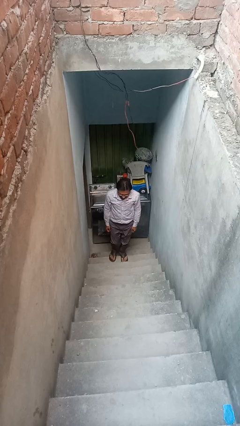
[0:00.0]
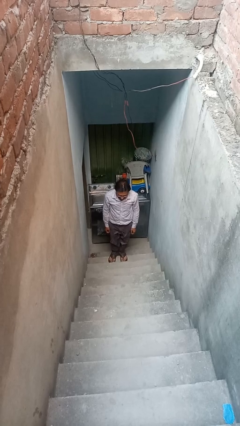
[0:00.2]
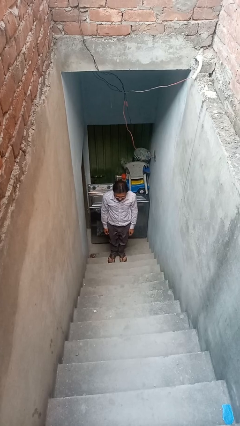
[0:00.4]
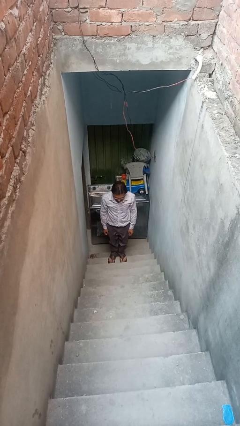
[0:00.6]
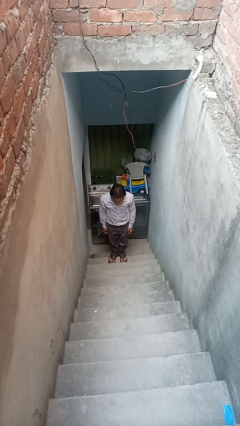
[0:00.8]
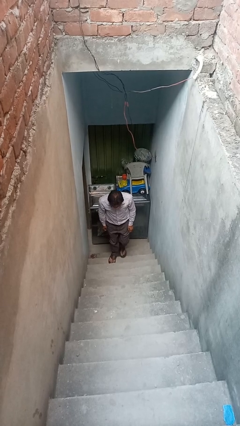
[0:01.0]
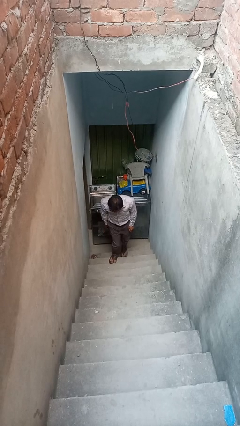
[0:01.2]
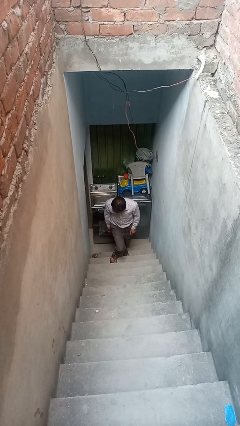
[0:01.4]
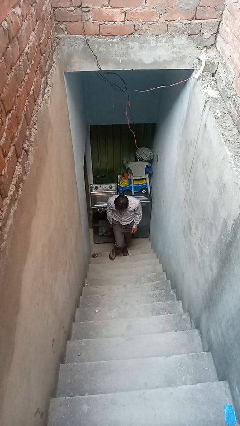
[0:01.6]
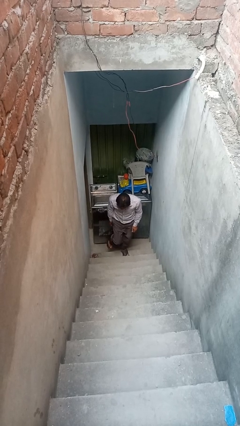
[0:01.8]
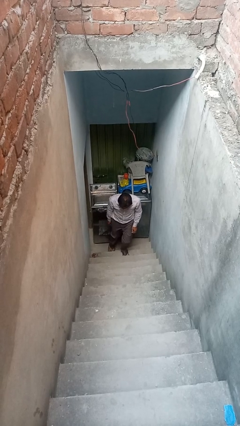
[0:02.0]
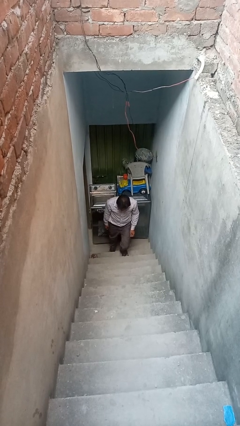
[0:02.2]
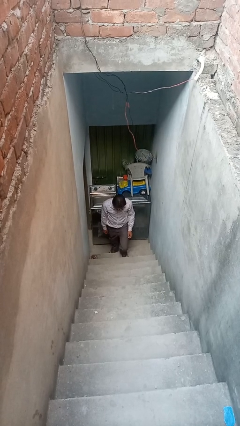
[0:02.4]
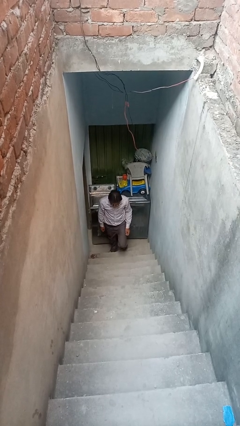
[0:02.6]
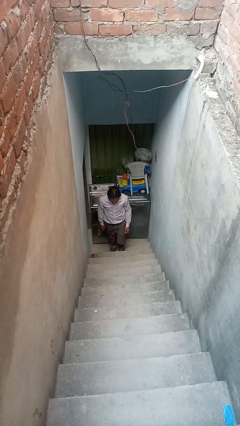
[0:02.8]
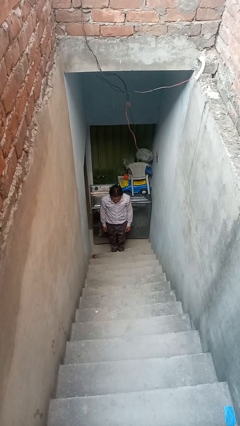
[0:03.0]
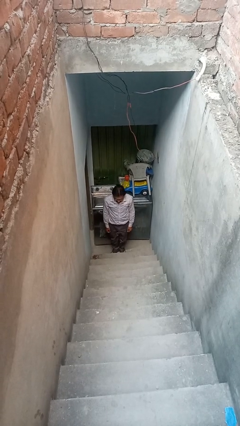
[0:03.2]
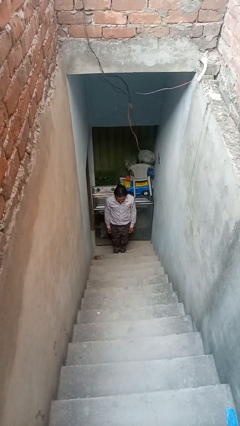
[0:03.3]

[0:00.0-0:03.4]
person climbs down stairs

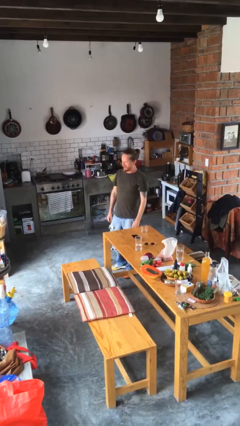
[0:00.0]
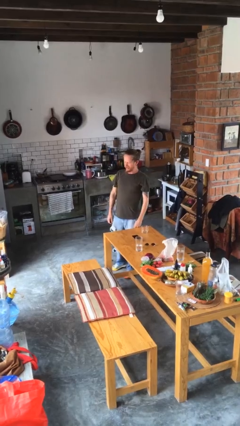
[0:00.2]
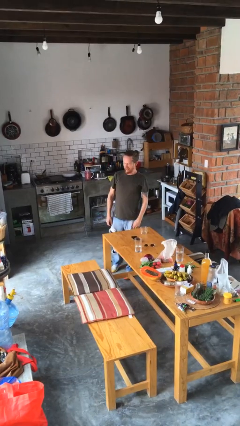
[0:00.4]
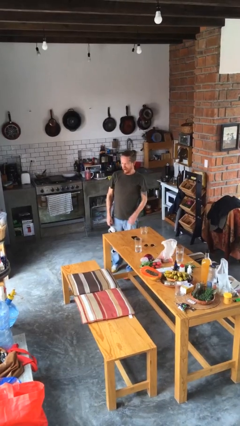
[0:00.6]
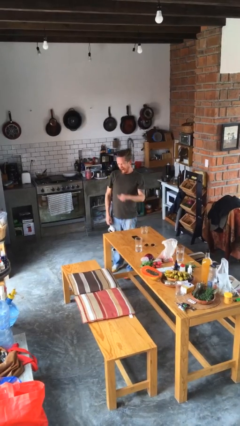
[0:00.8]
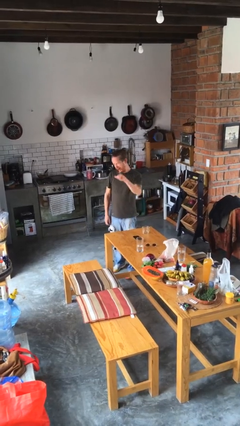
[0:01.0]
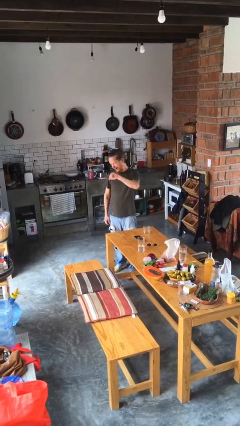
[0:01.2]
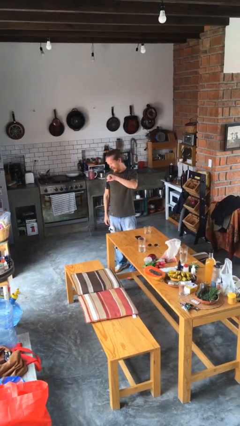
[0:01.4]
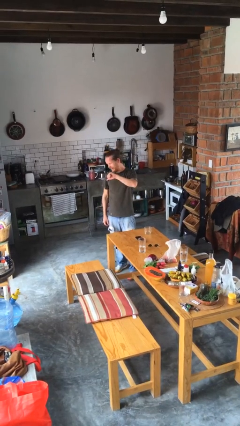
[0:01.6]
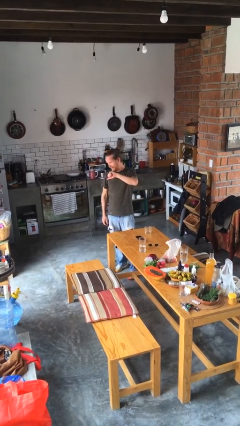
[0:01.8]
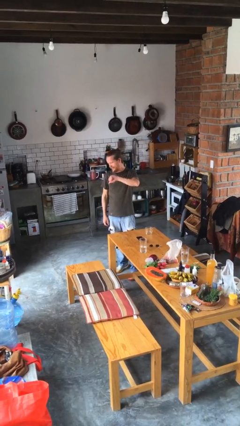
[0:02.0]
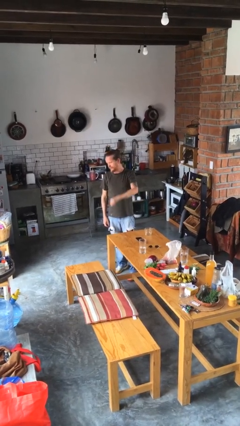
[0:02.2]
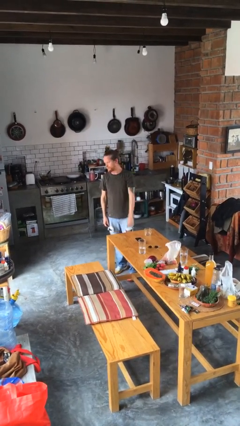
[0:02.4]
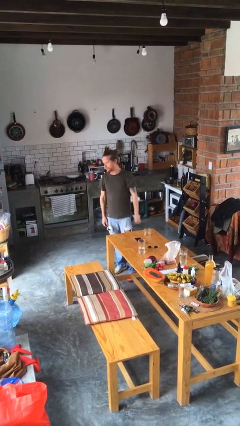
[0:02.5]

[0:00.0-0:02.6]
person gestures thumbs down

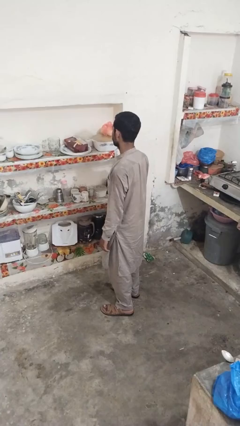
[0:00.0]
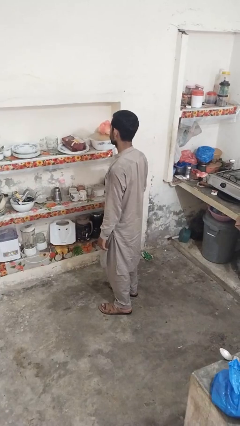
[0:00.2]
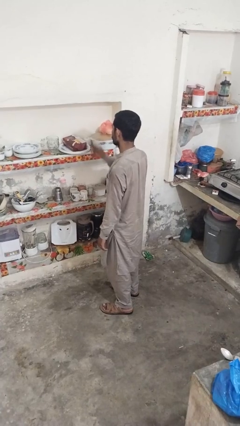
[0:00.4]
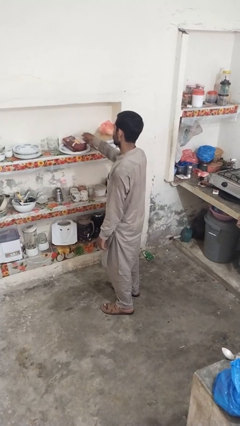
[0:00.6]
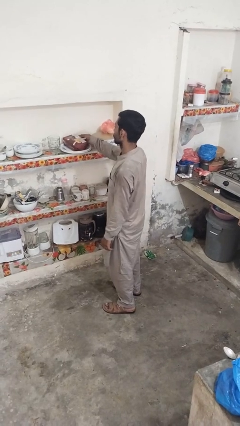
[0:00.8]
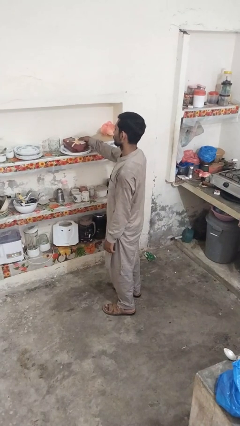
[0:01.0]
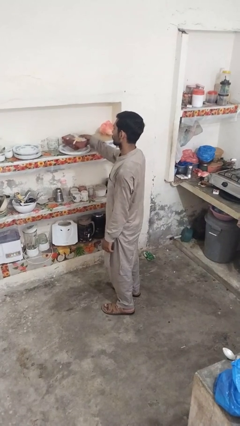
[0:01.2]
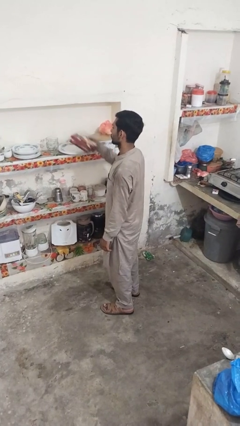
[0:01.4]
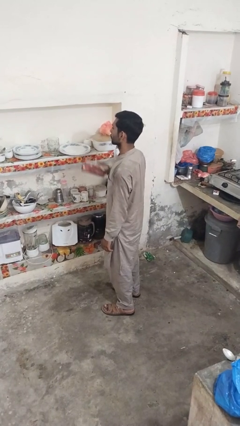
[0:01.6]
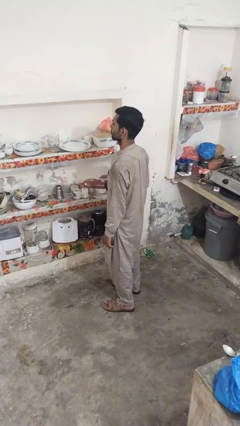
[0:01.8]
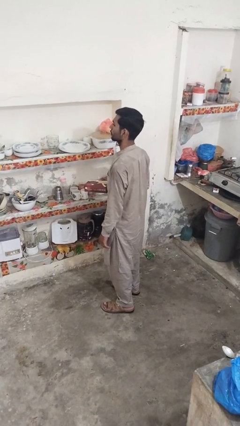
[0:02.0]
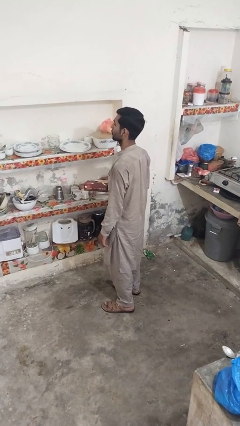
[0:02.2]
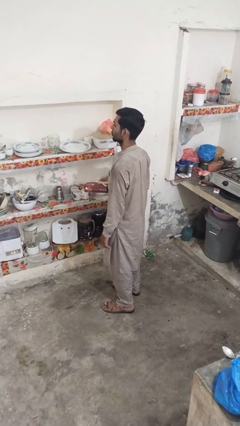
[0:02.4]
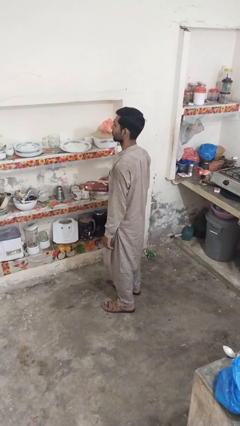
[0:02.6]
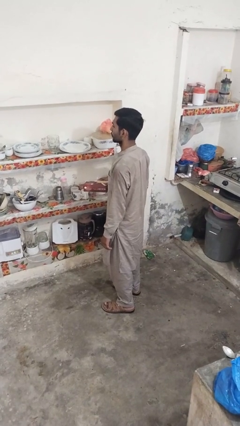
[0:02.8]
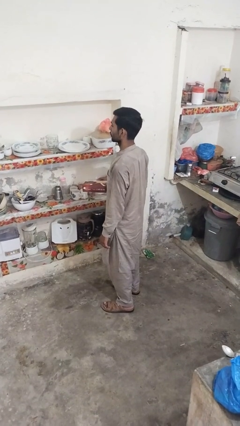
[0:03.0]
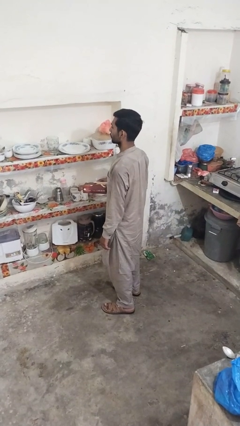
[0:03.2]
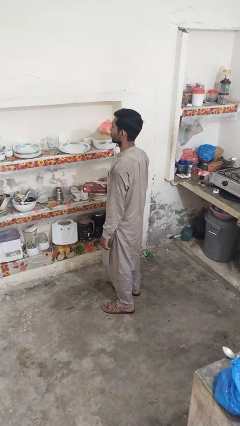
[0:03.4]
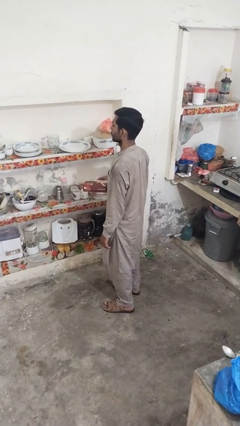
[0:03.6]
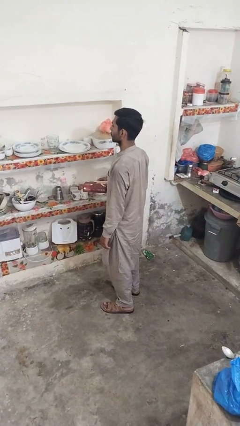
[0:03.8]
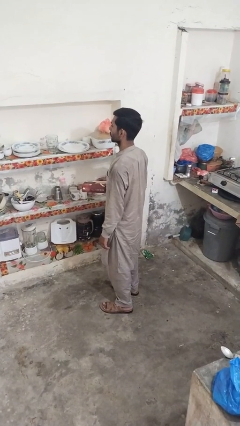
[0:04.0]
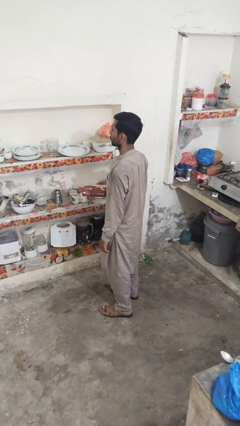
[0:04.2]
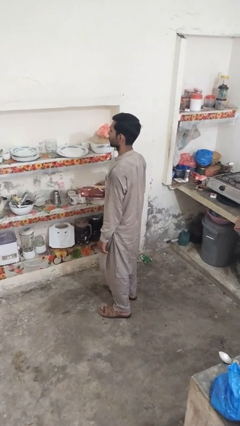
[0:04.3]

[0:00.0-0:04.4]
person picks up object from cabinet

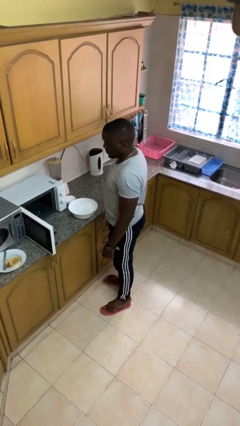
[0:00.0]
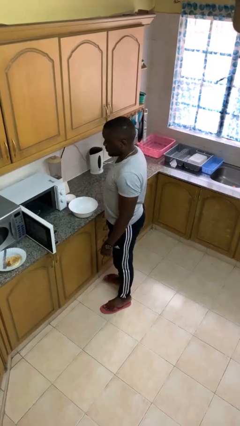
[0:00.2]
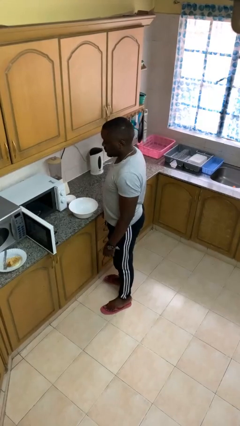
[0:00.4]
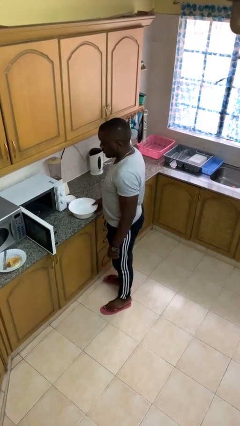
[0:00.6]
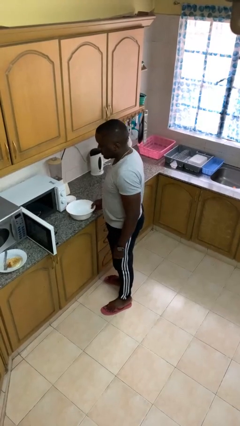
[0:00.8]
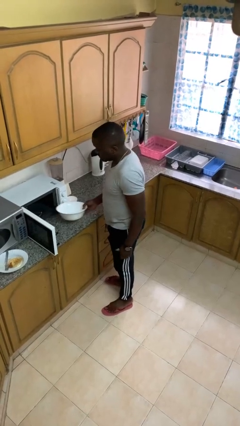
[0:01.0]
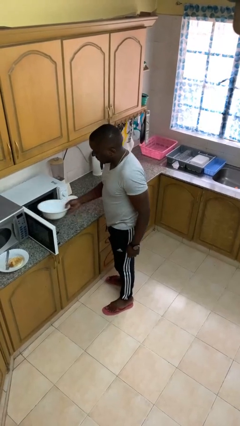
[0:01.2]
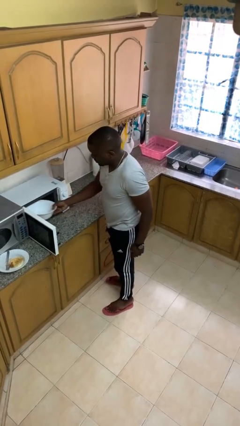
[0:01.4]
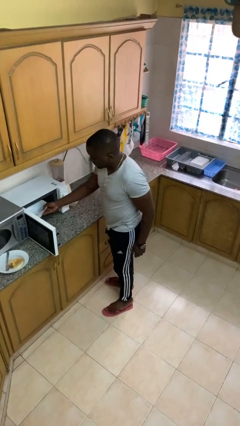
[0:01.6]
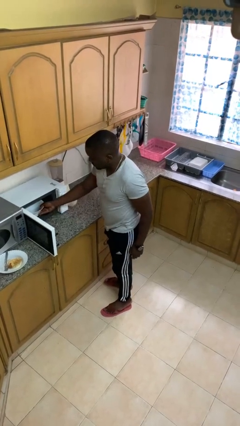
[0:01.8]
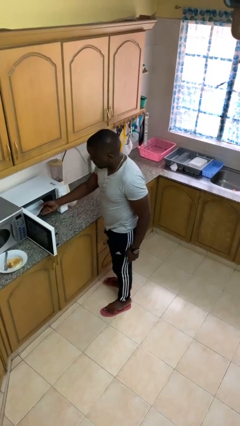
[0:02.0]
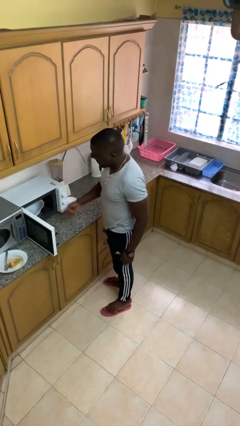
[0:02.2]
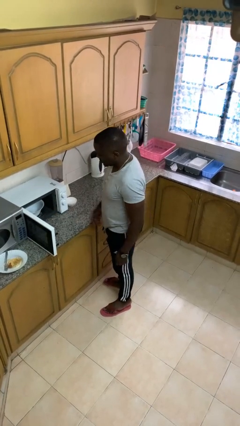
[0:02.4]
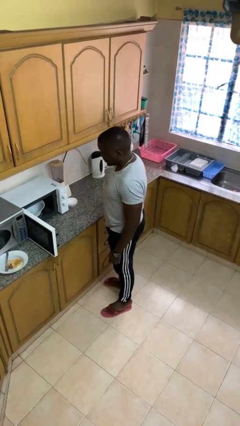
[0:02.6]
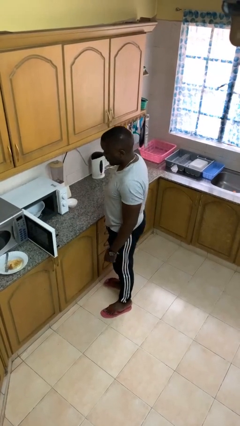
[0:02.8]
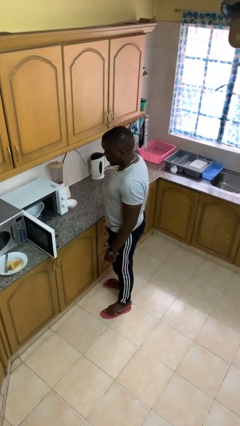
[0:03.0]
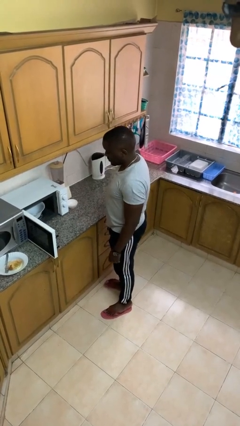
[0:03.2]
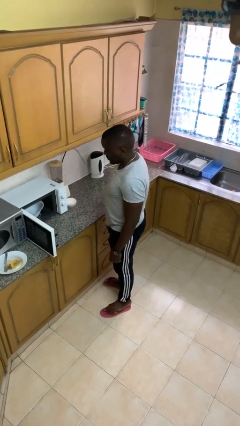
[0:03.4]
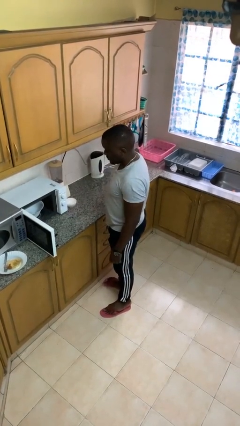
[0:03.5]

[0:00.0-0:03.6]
person puts object into microwave

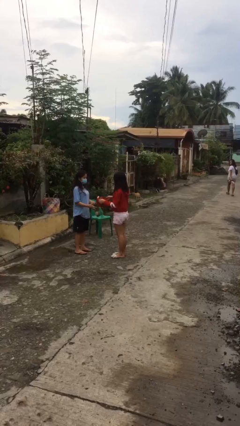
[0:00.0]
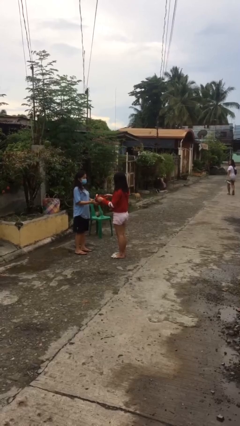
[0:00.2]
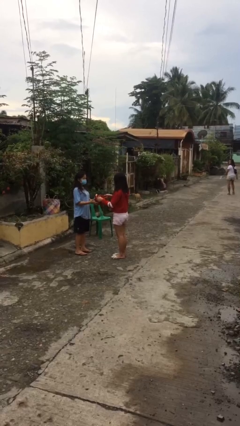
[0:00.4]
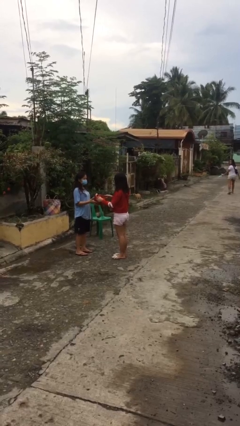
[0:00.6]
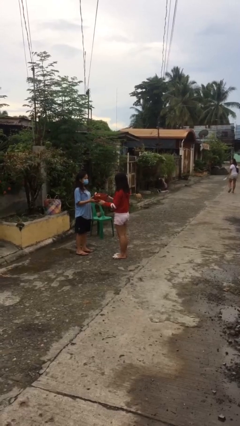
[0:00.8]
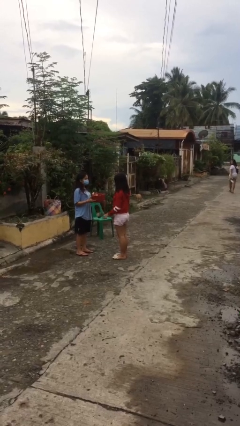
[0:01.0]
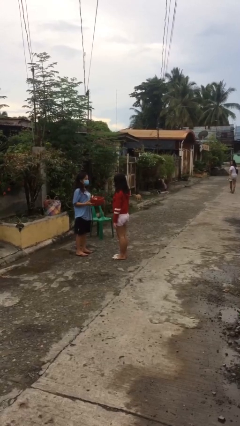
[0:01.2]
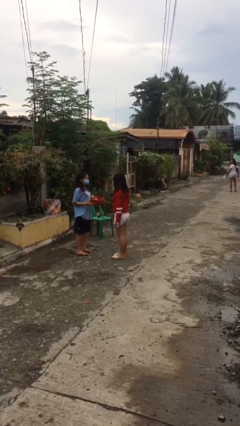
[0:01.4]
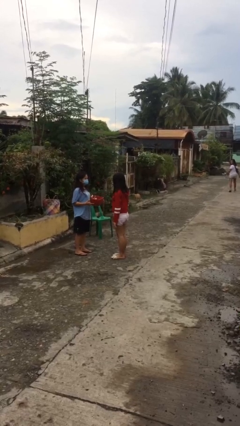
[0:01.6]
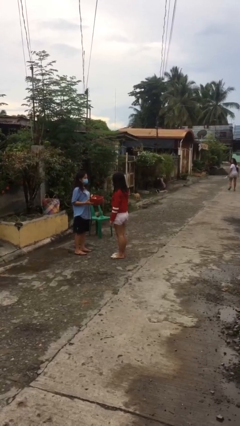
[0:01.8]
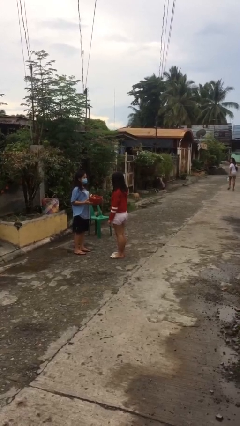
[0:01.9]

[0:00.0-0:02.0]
person transfers object to person

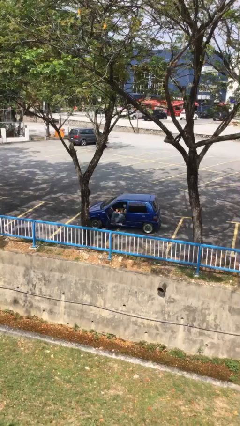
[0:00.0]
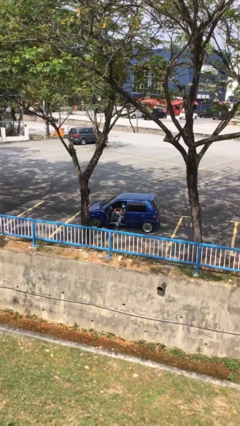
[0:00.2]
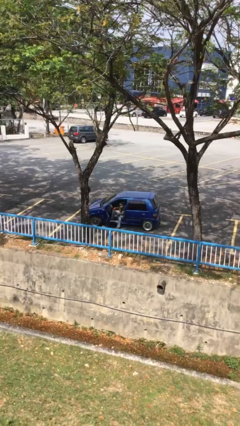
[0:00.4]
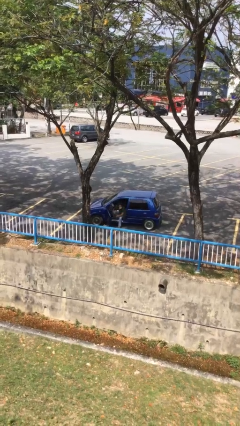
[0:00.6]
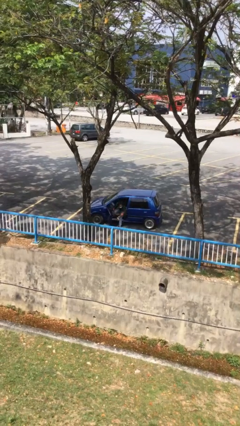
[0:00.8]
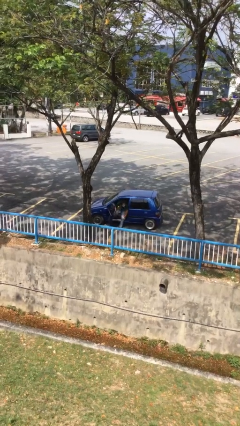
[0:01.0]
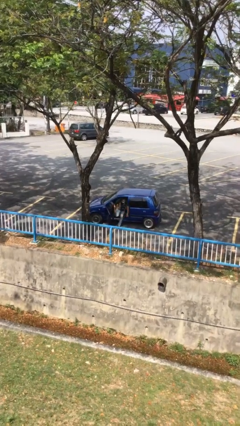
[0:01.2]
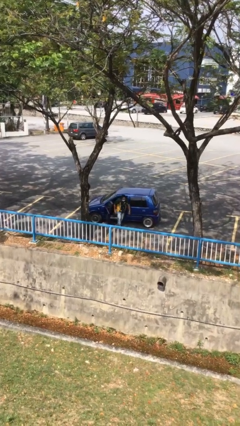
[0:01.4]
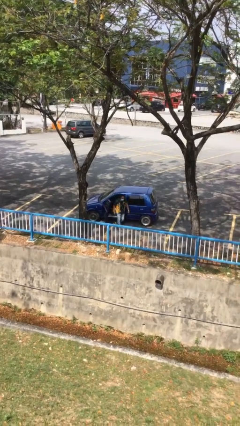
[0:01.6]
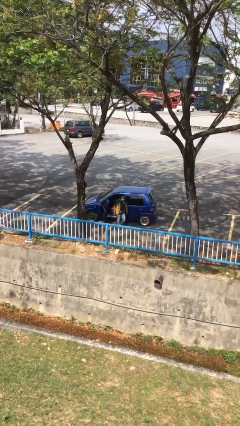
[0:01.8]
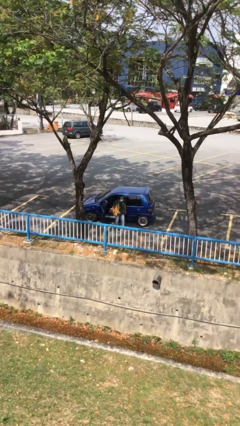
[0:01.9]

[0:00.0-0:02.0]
person exits car
